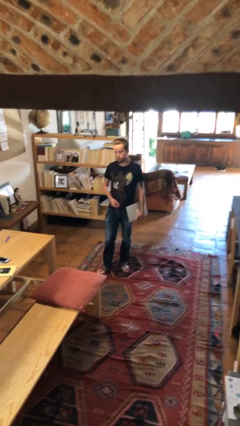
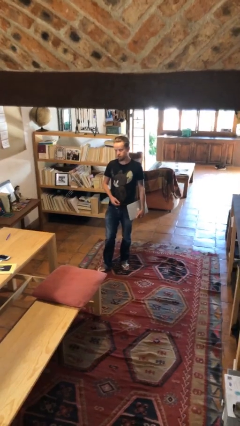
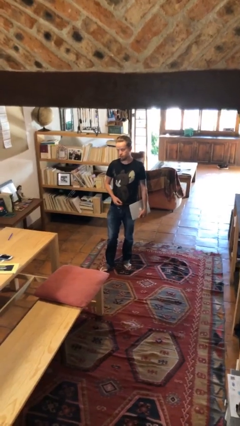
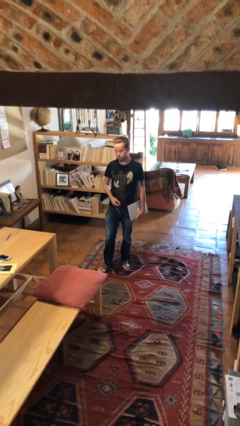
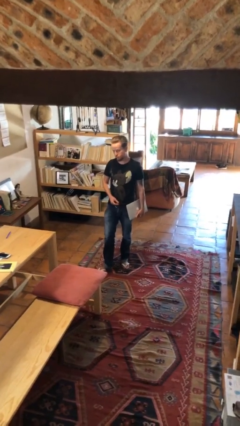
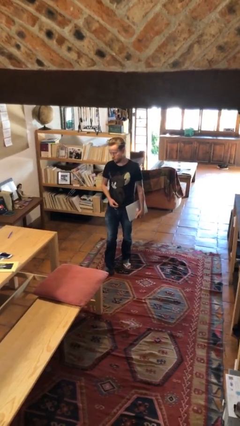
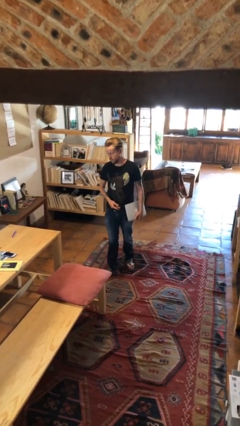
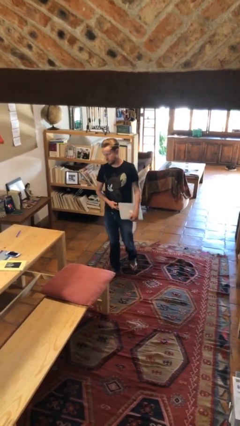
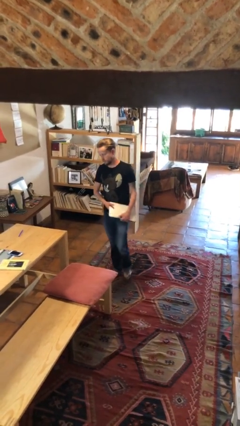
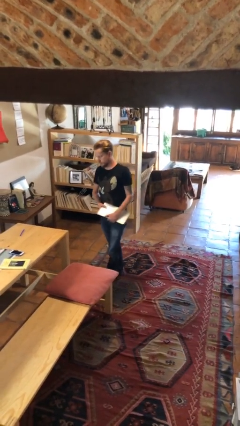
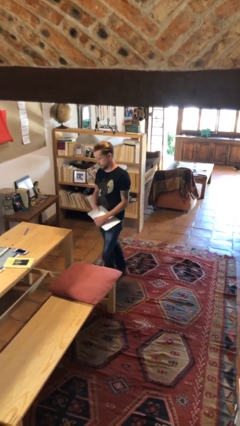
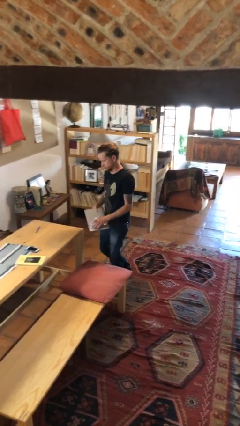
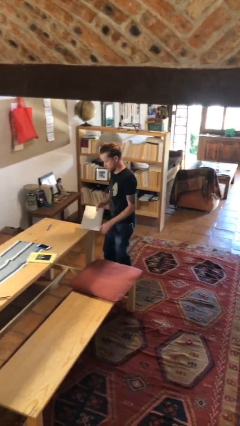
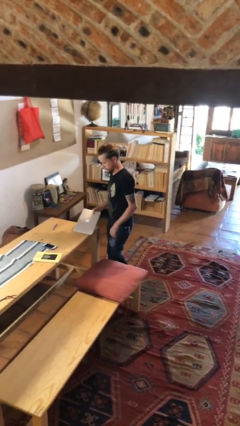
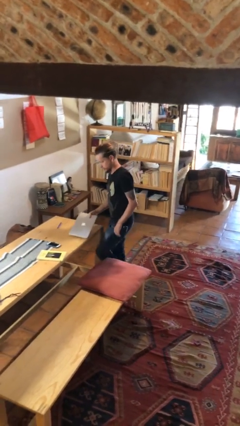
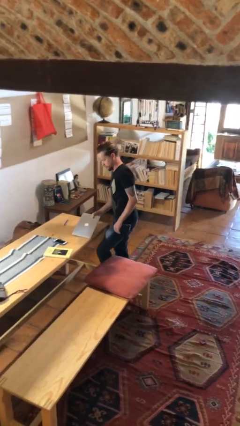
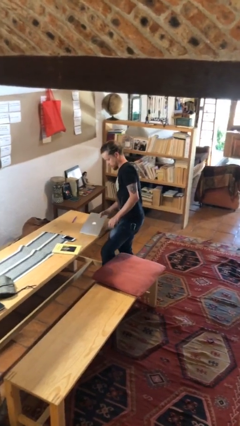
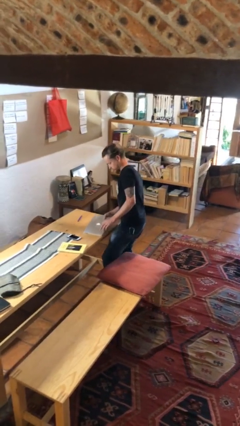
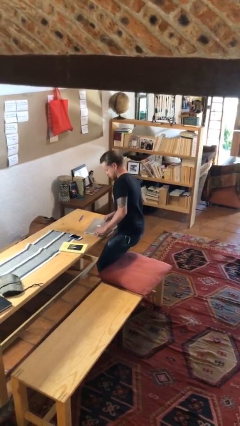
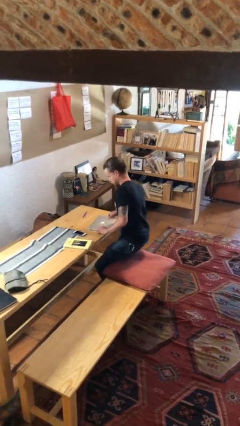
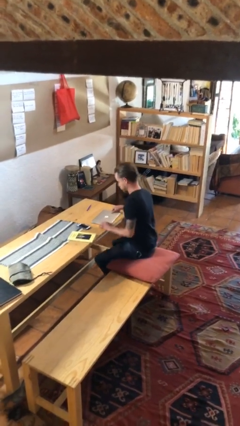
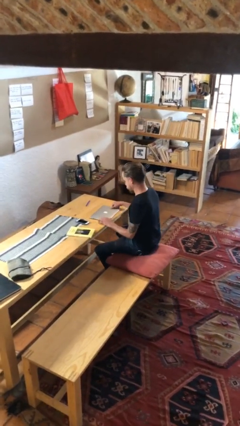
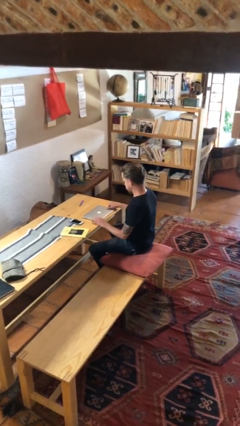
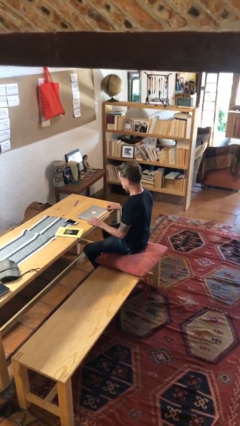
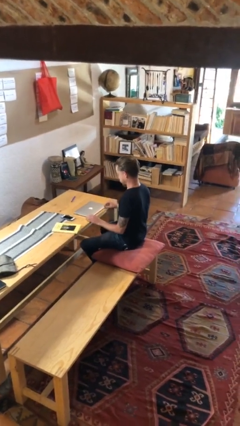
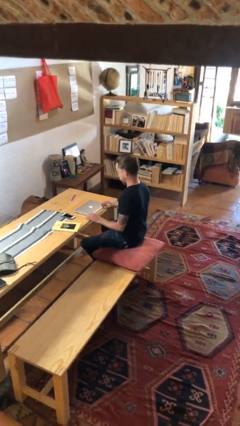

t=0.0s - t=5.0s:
person sits down

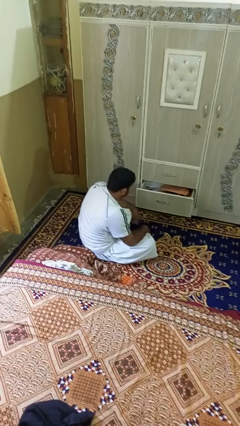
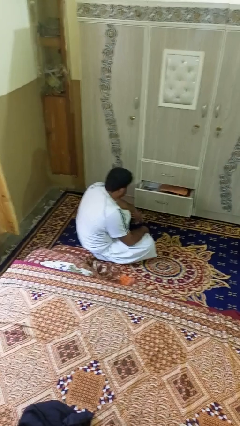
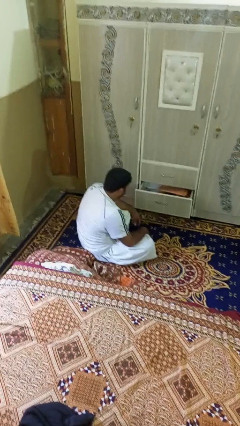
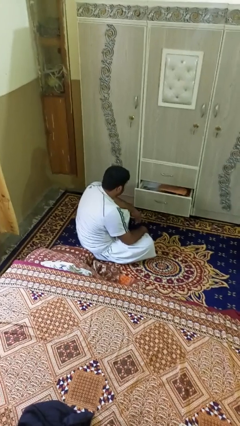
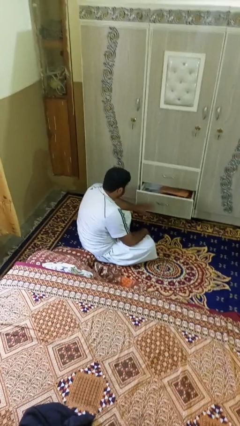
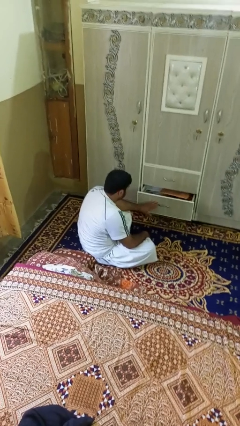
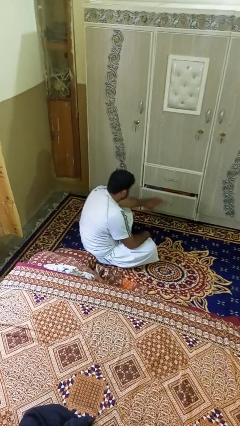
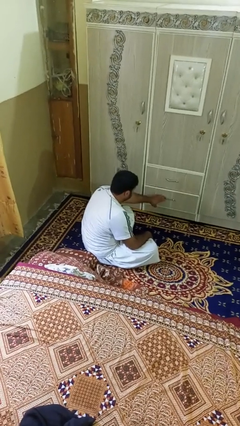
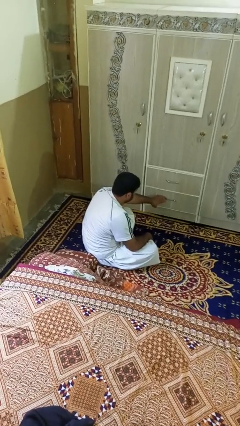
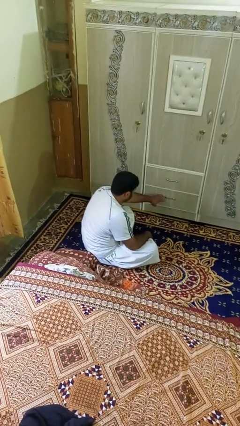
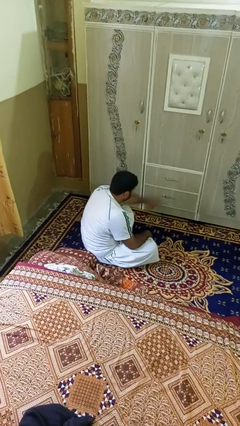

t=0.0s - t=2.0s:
person closes dresser drawer

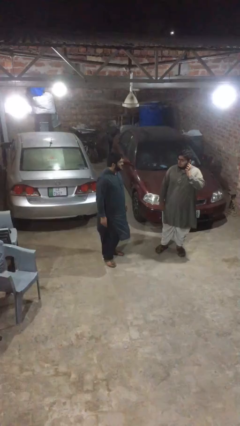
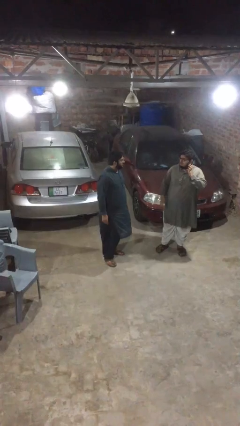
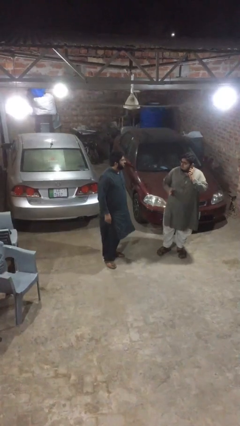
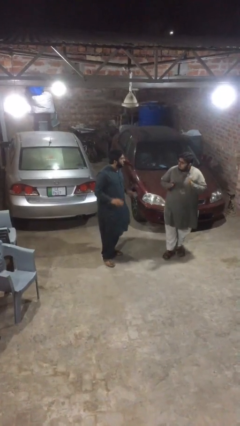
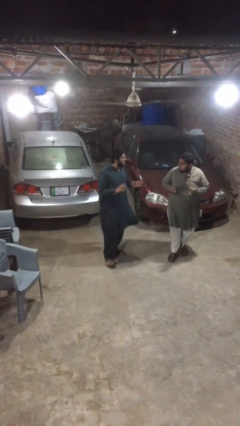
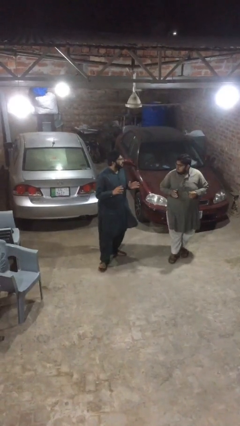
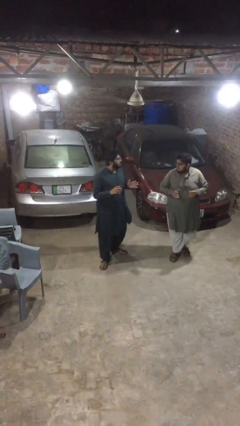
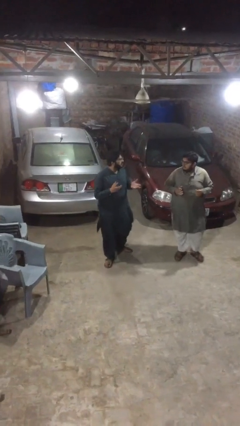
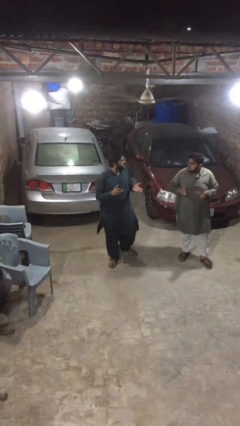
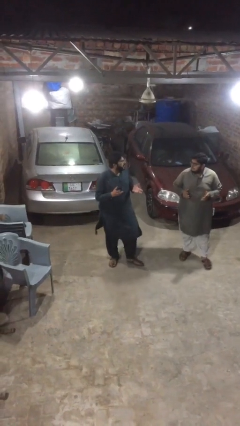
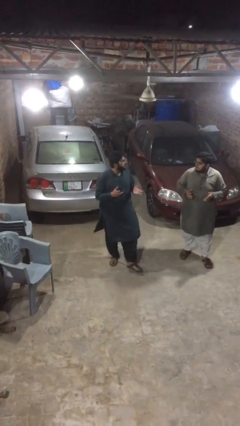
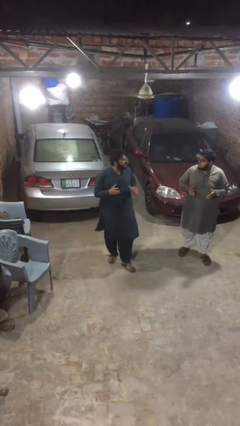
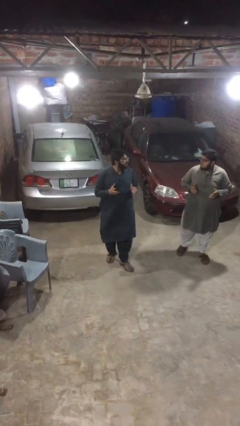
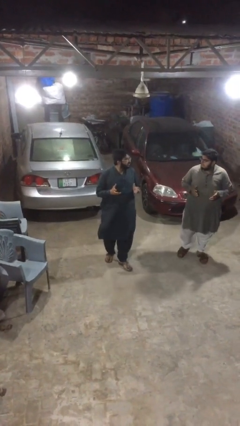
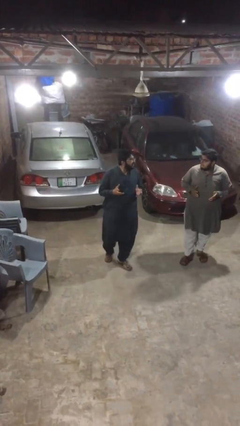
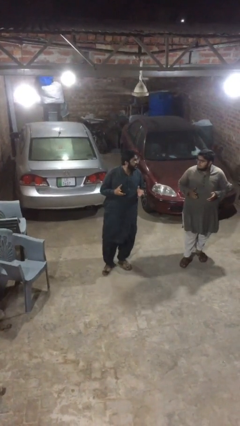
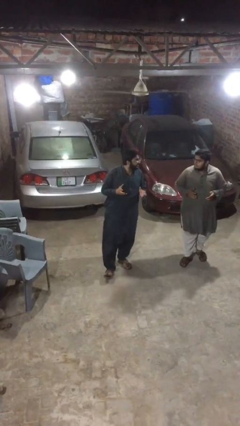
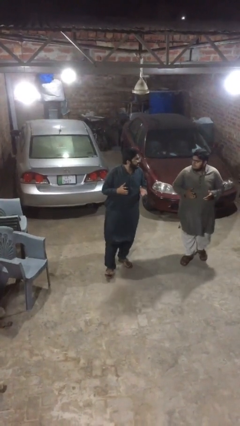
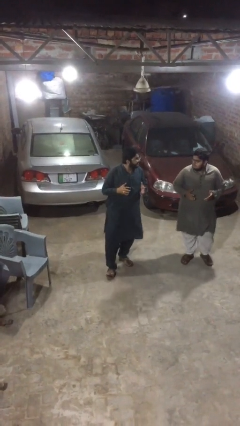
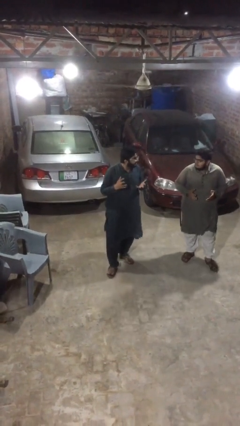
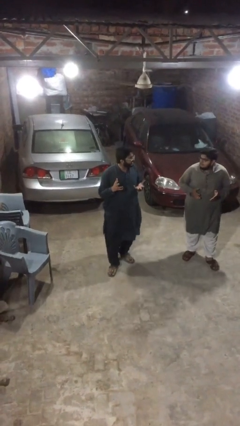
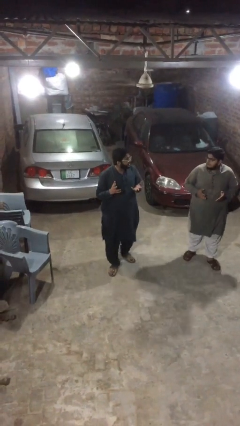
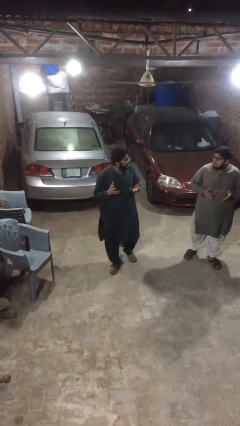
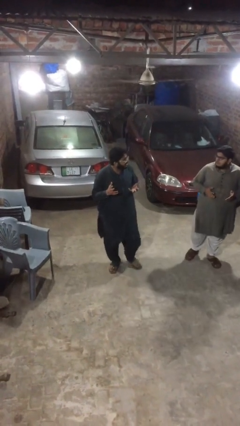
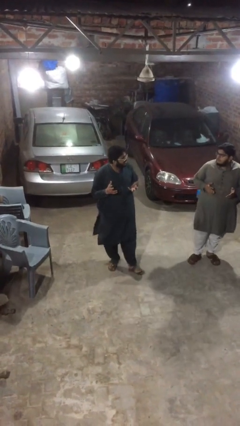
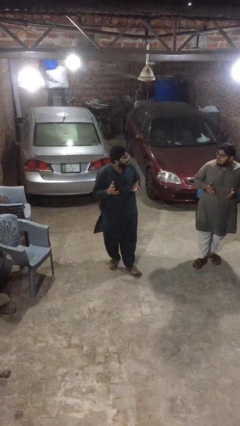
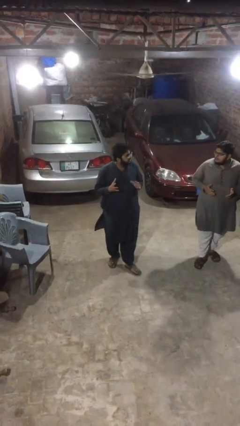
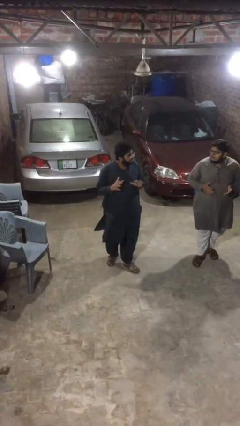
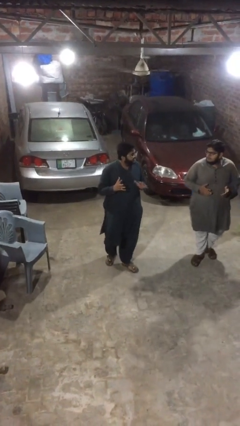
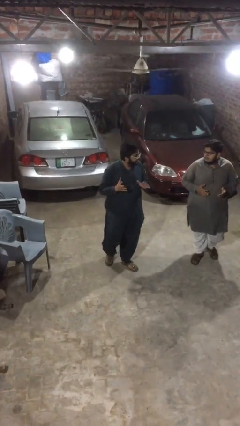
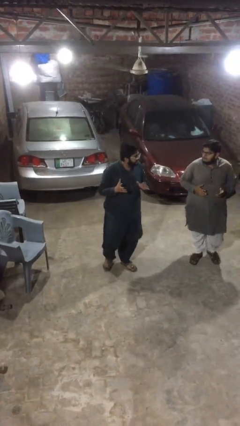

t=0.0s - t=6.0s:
person talks to person

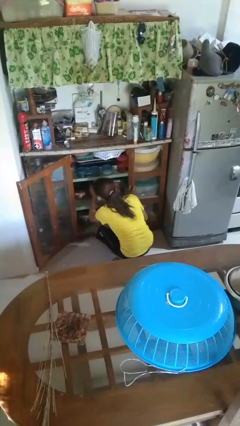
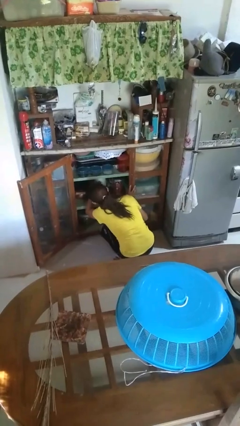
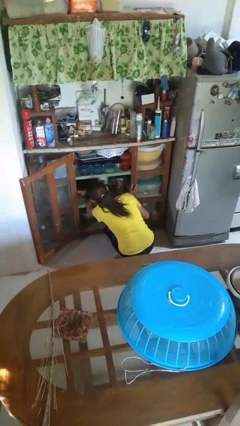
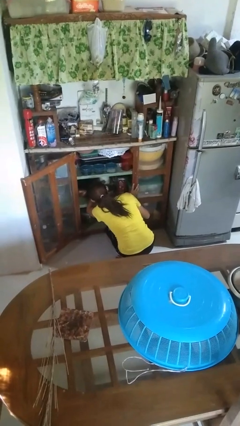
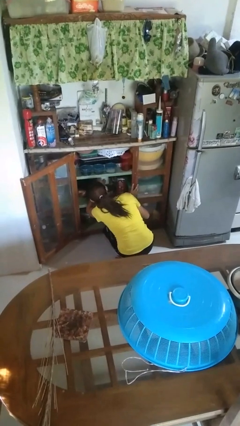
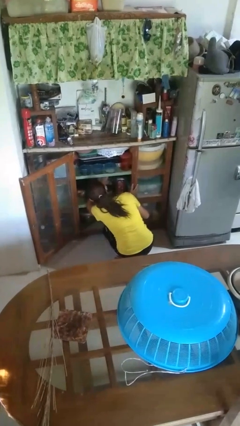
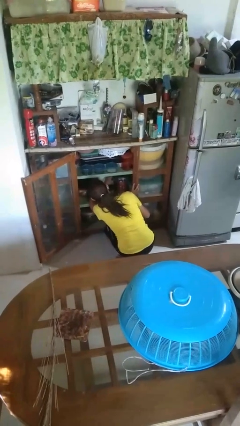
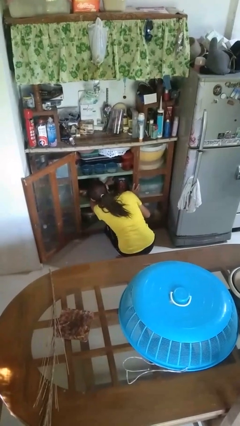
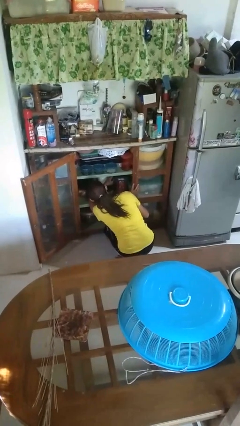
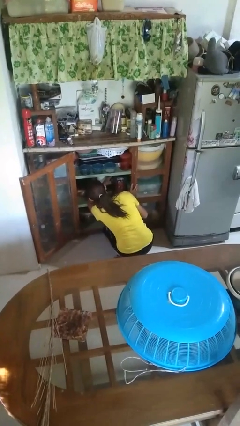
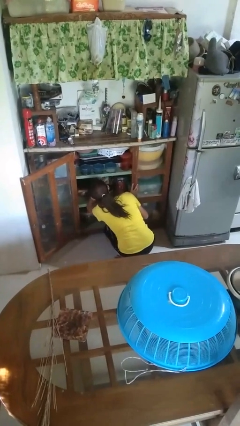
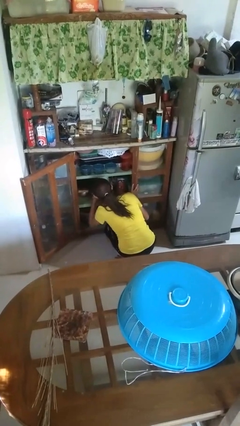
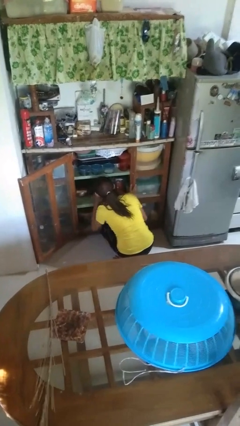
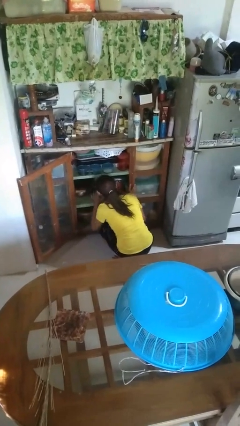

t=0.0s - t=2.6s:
person searches in cabinet

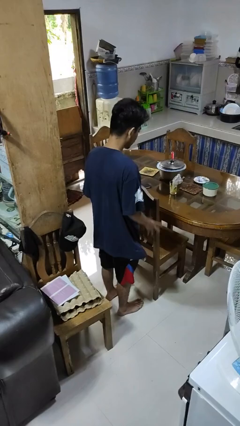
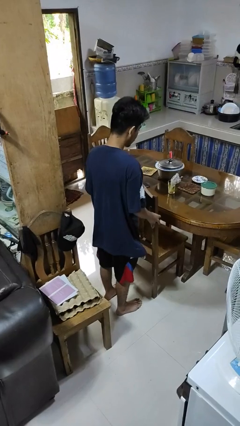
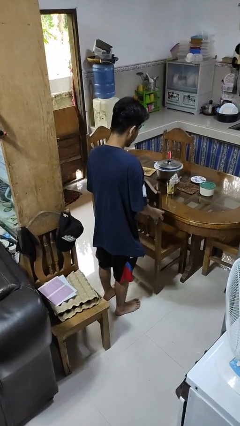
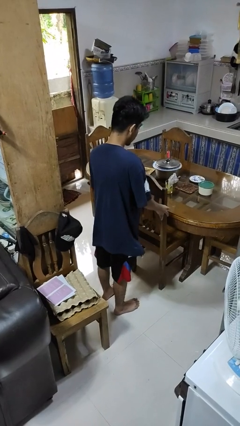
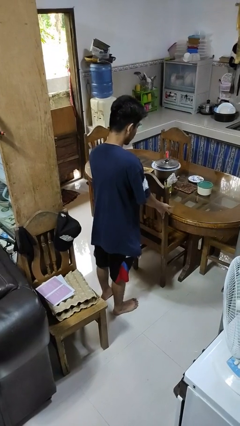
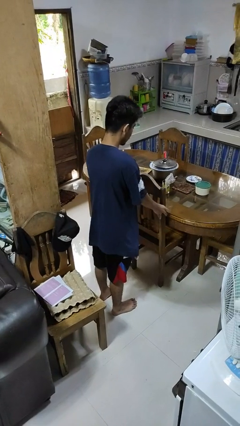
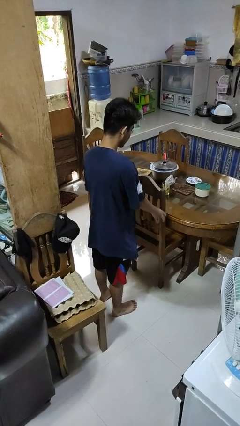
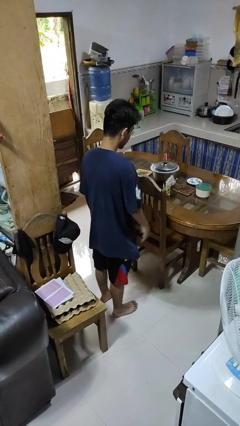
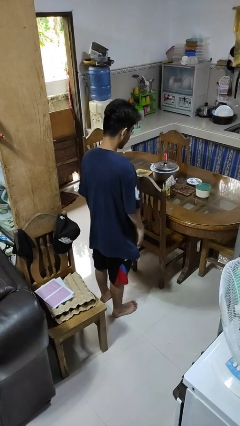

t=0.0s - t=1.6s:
person pushes in chair

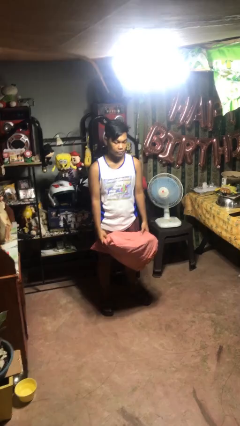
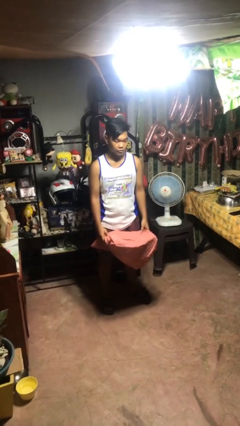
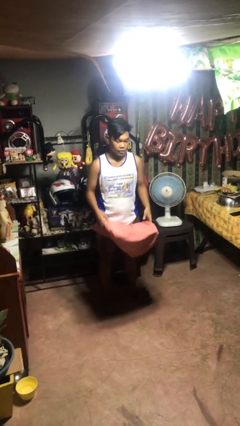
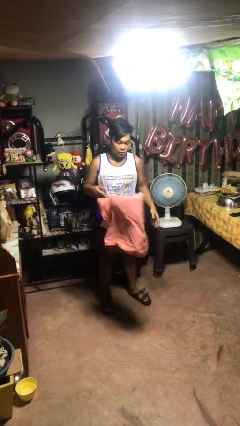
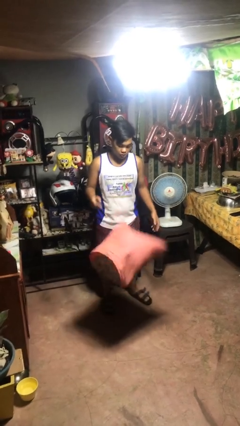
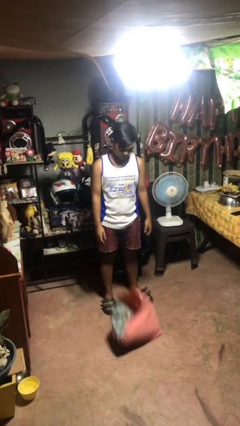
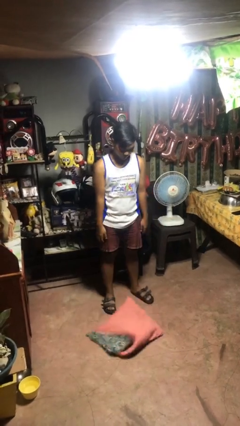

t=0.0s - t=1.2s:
person drops object
